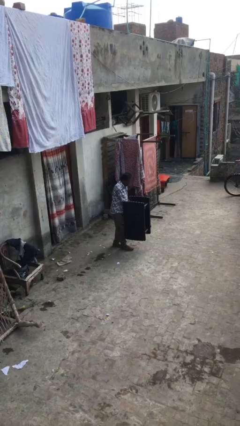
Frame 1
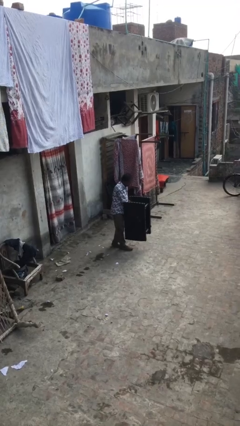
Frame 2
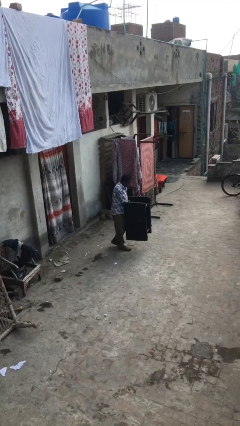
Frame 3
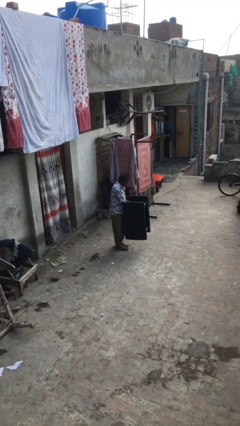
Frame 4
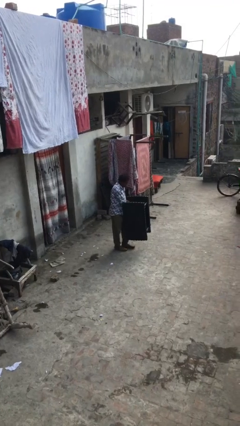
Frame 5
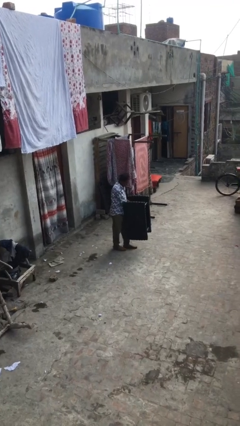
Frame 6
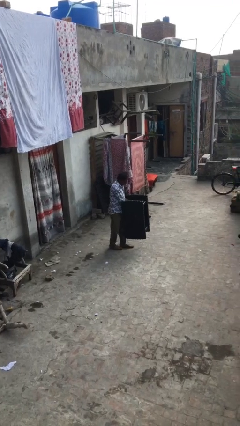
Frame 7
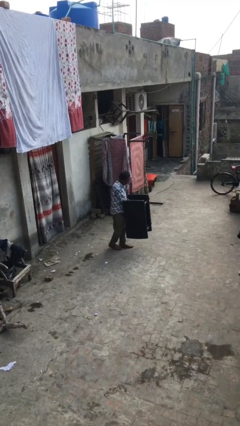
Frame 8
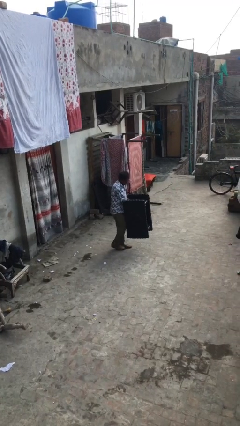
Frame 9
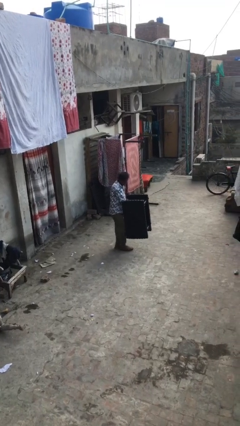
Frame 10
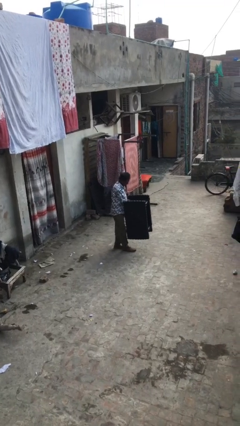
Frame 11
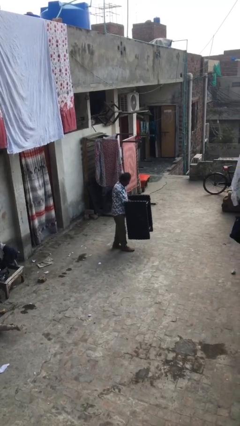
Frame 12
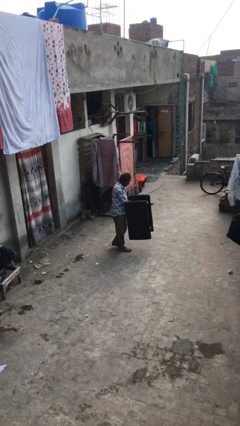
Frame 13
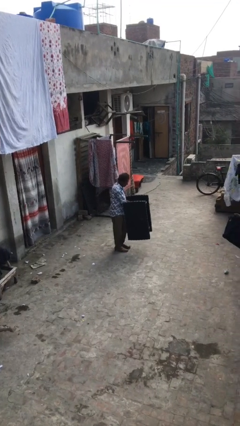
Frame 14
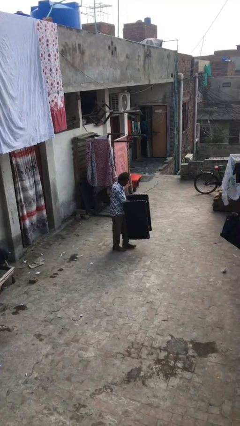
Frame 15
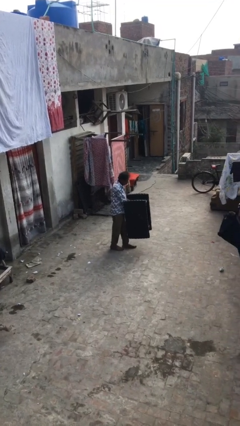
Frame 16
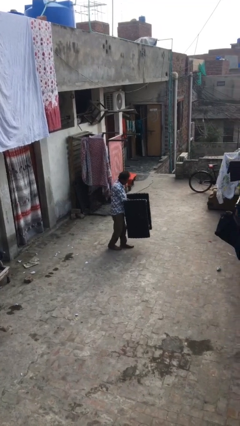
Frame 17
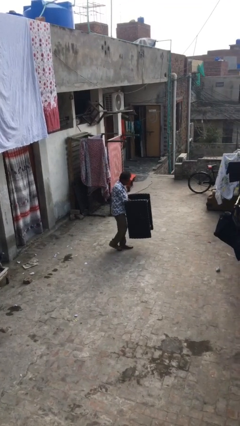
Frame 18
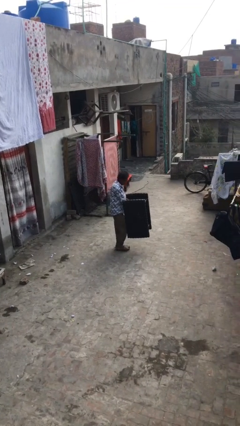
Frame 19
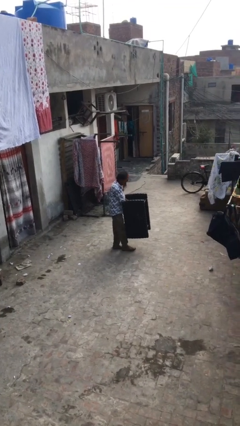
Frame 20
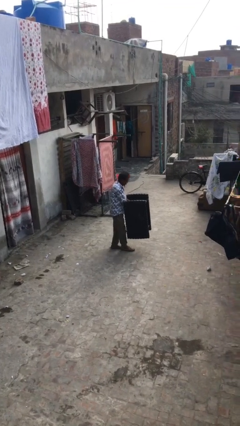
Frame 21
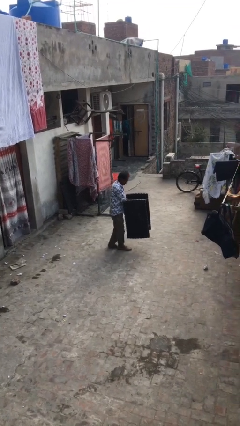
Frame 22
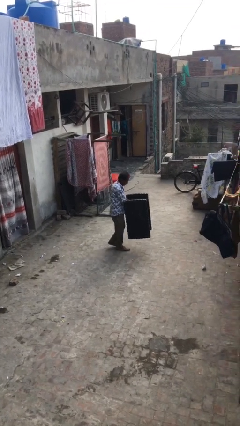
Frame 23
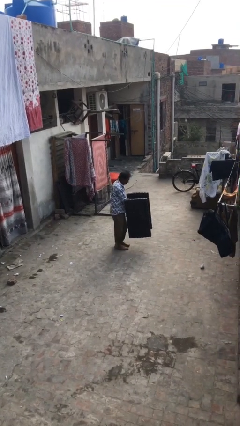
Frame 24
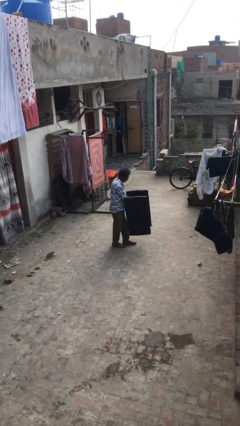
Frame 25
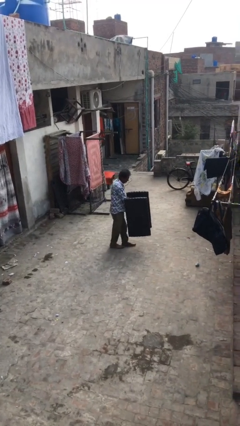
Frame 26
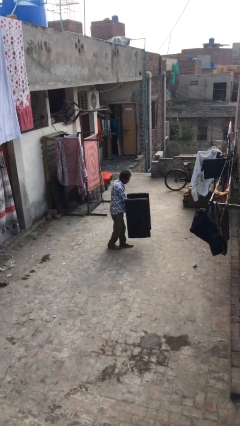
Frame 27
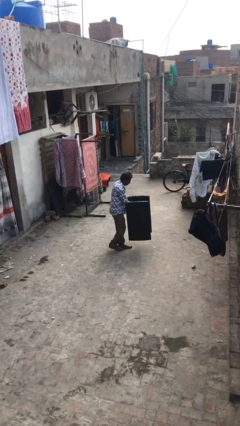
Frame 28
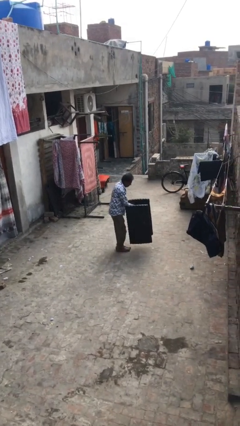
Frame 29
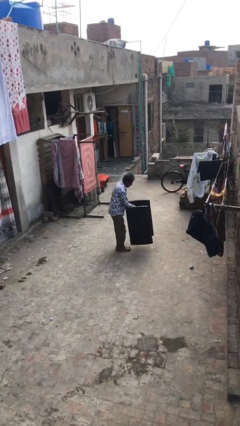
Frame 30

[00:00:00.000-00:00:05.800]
person carries heavy object

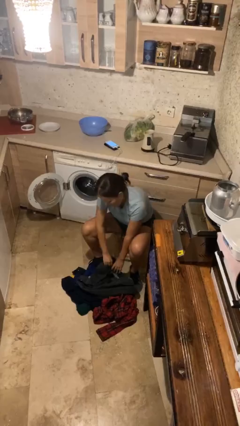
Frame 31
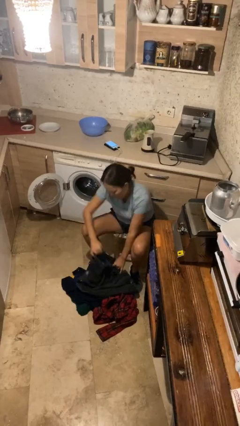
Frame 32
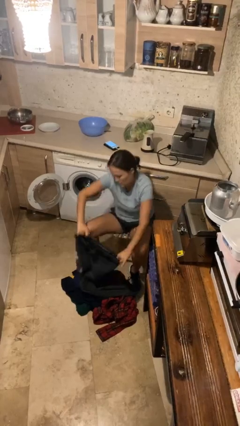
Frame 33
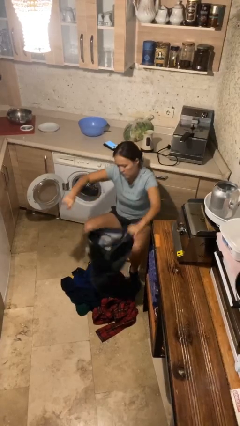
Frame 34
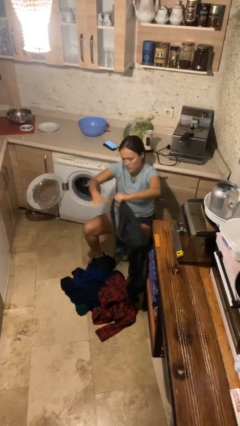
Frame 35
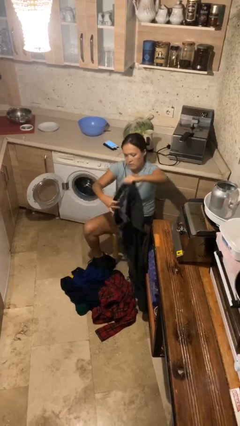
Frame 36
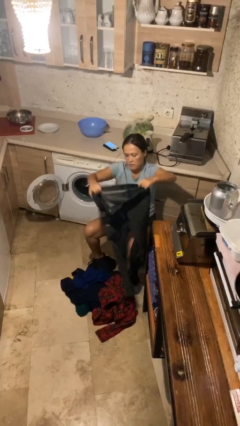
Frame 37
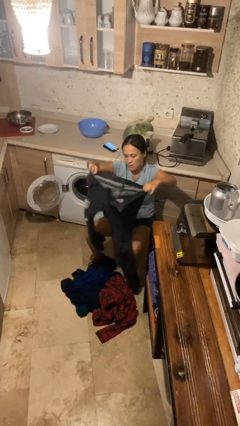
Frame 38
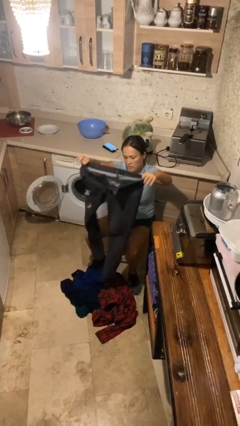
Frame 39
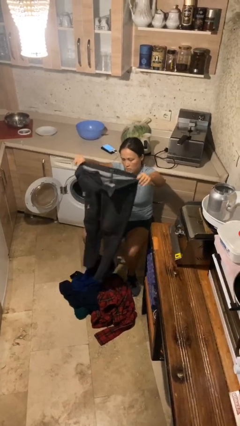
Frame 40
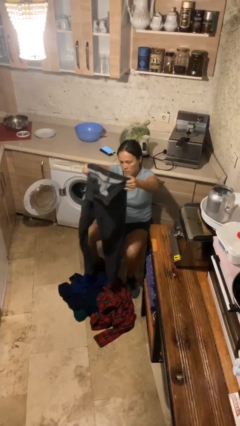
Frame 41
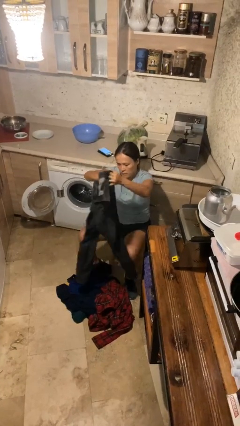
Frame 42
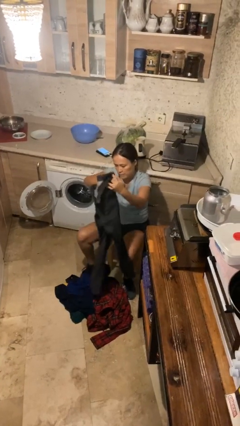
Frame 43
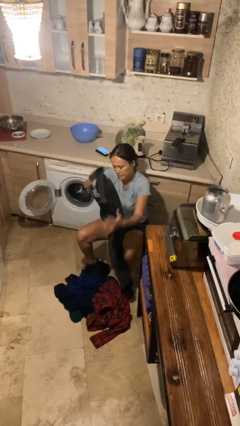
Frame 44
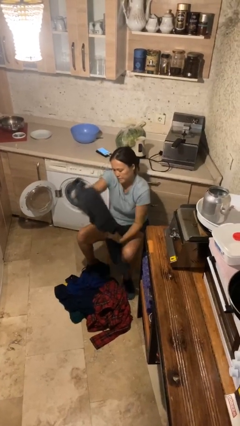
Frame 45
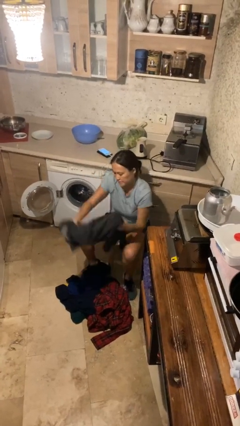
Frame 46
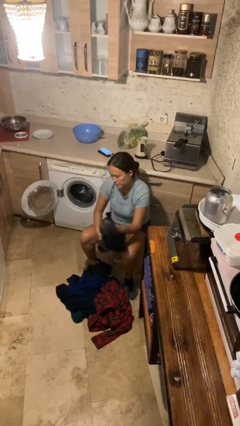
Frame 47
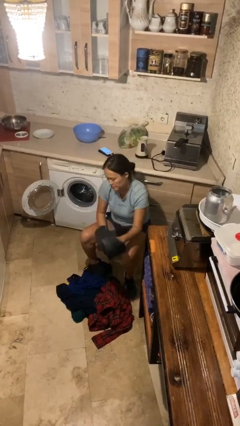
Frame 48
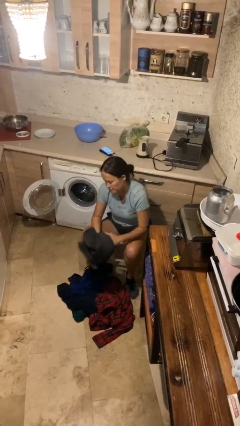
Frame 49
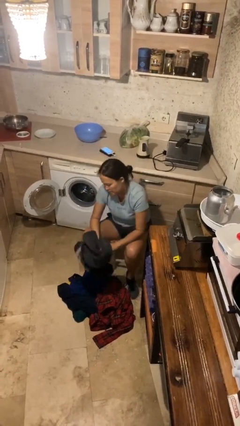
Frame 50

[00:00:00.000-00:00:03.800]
person folds pants

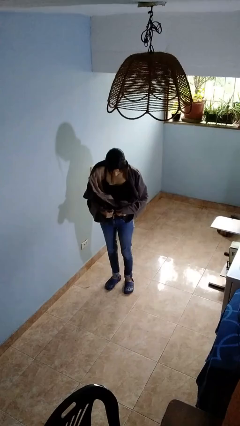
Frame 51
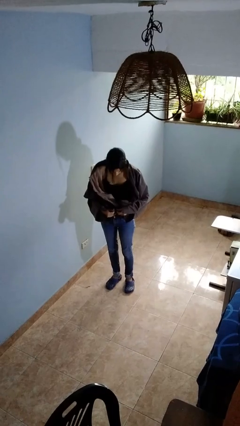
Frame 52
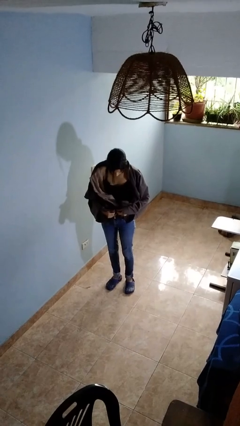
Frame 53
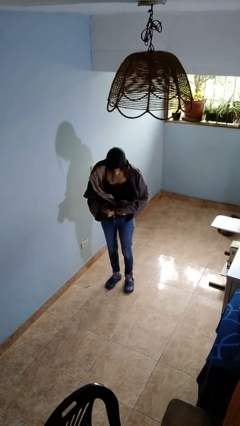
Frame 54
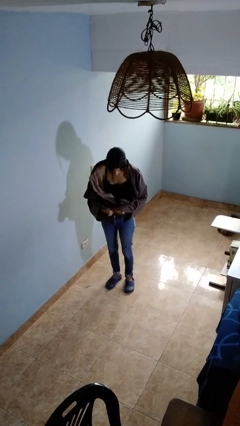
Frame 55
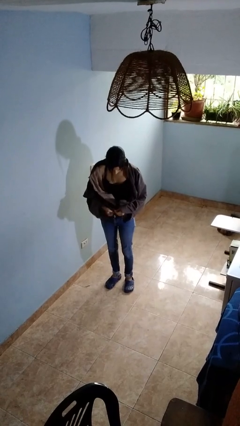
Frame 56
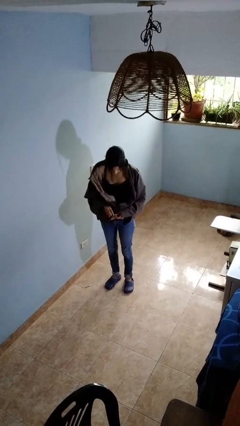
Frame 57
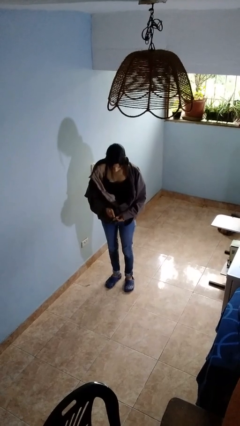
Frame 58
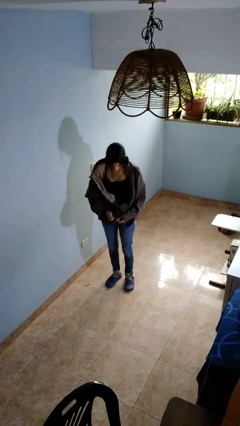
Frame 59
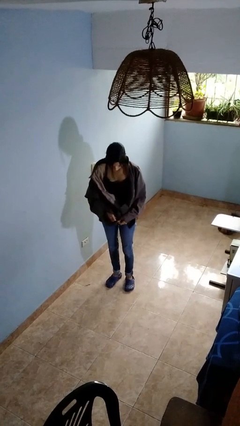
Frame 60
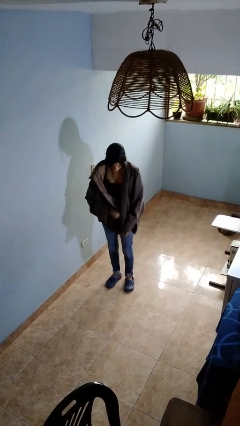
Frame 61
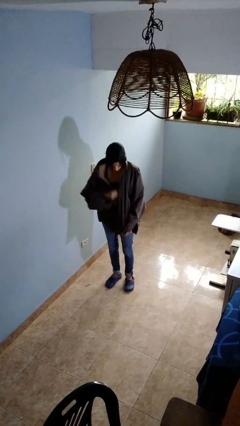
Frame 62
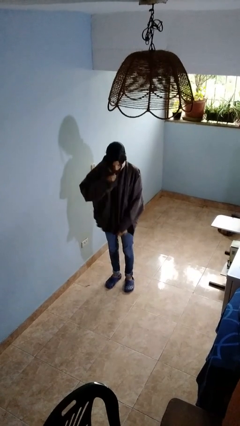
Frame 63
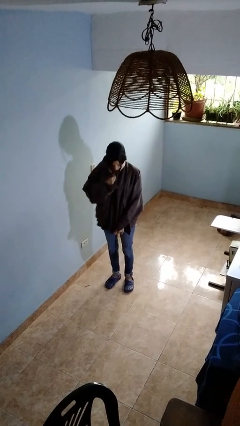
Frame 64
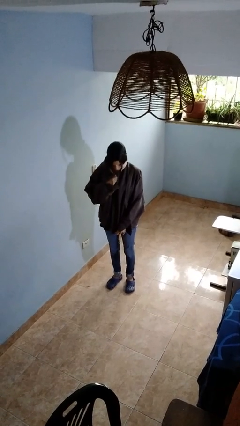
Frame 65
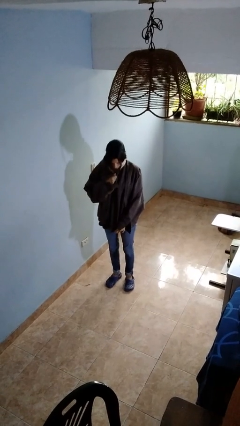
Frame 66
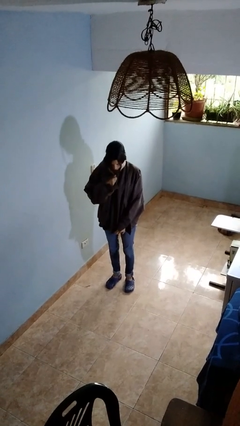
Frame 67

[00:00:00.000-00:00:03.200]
person zips up jacket

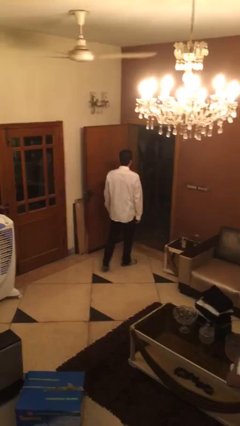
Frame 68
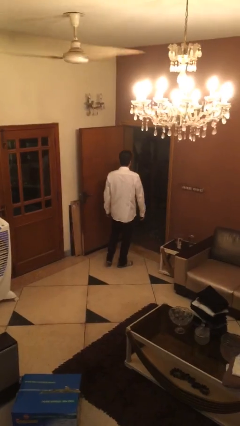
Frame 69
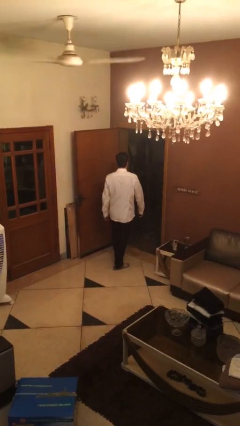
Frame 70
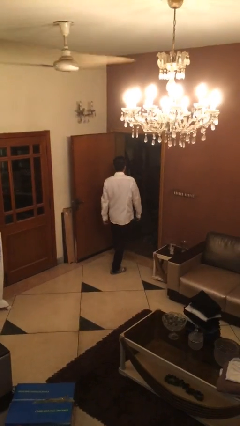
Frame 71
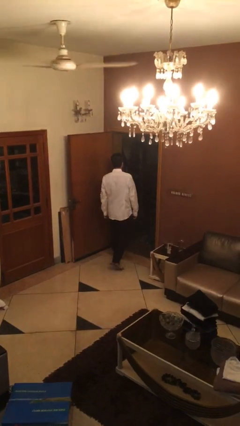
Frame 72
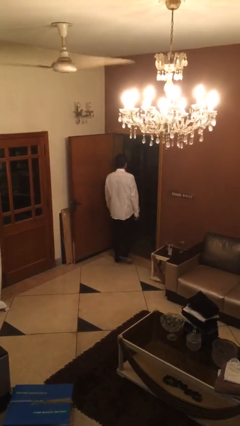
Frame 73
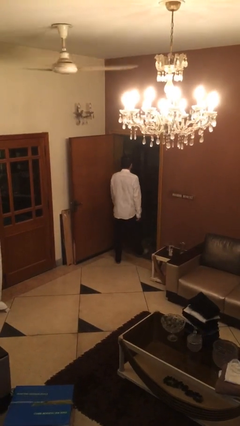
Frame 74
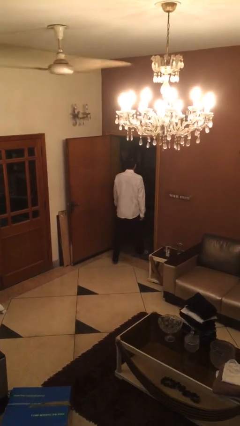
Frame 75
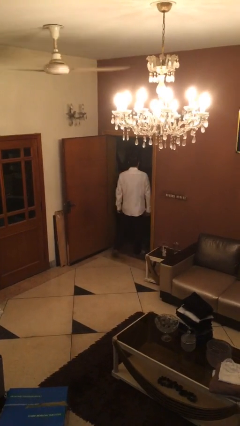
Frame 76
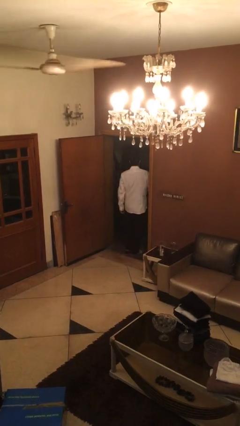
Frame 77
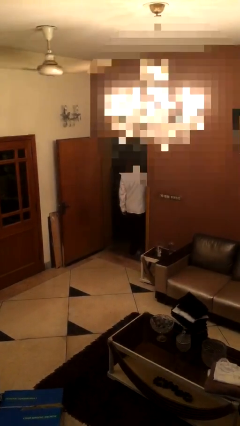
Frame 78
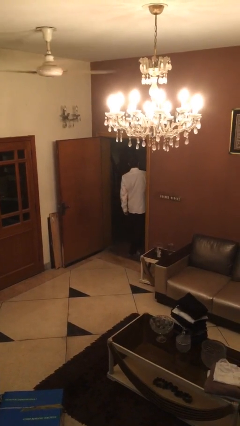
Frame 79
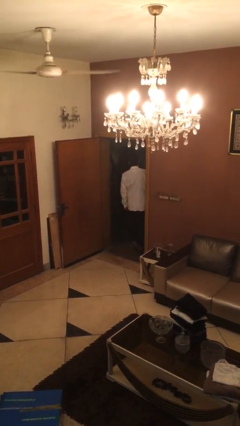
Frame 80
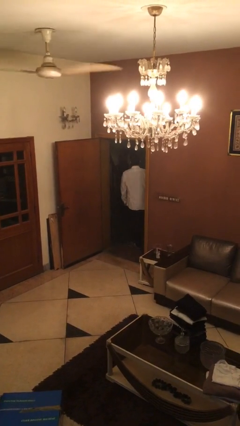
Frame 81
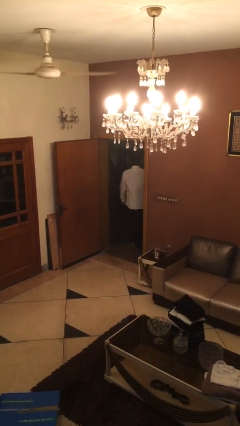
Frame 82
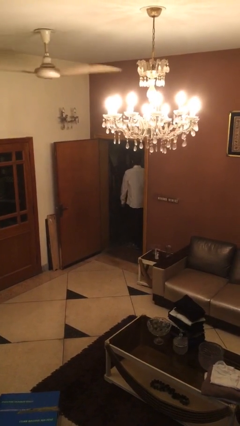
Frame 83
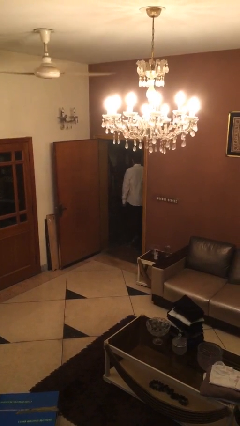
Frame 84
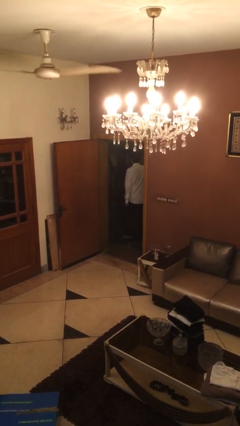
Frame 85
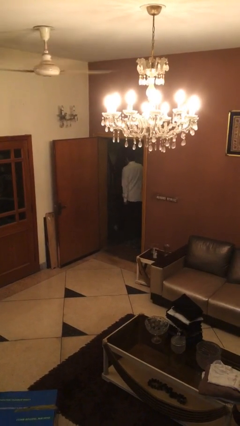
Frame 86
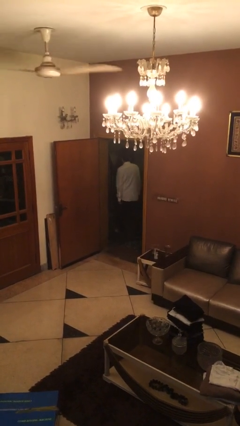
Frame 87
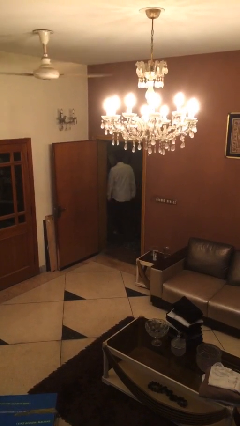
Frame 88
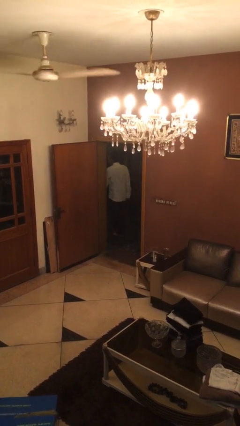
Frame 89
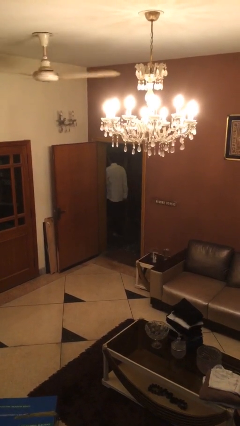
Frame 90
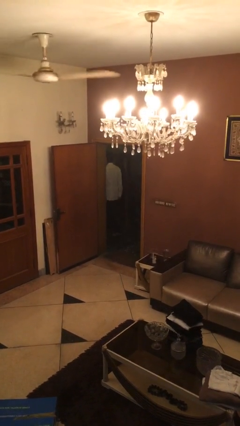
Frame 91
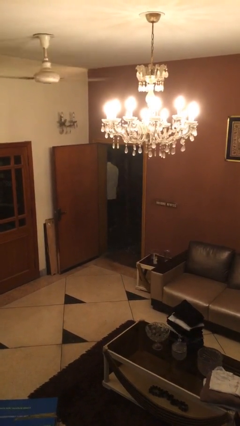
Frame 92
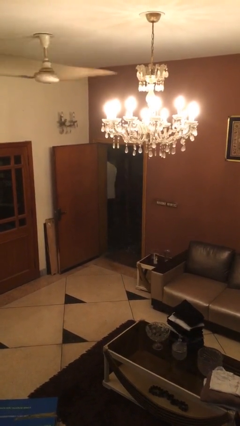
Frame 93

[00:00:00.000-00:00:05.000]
person exits scene through structure
